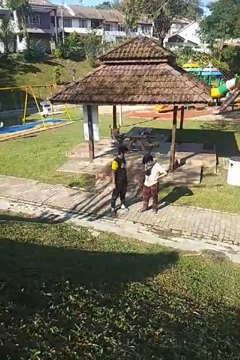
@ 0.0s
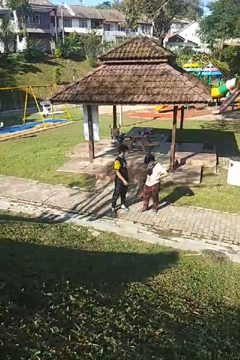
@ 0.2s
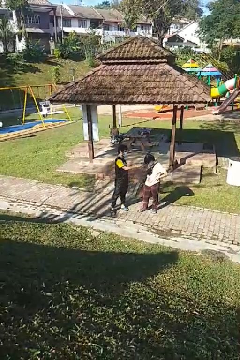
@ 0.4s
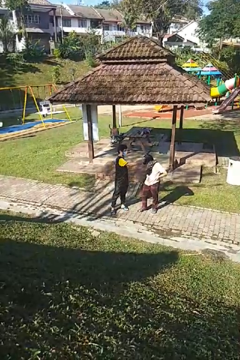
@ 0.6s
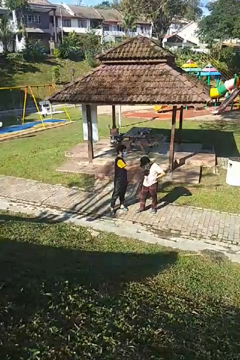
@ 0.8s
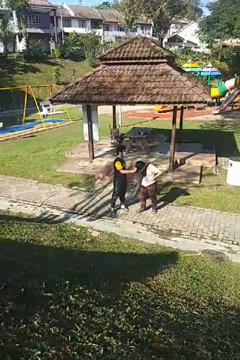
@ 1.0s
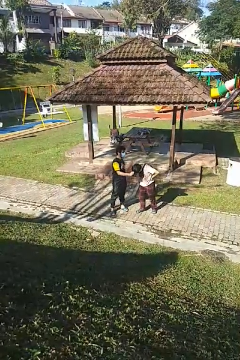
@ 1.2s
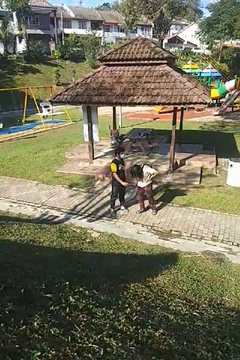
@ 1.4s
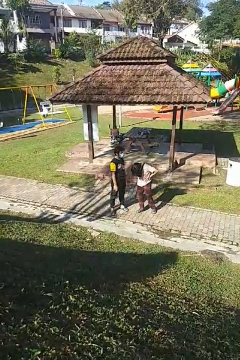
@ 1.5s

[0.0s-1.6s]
person grabs person by hair

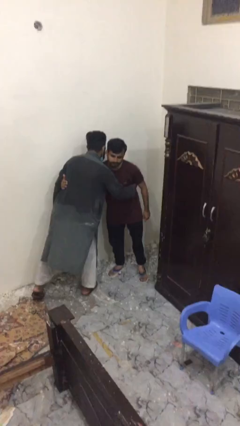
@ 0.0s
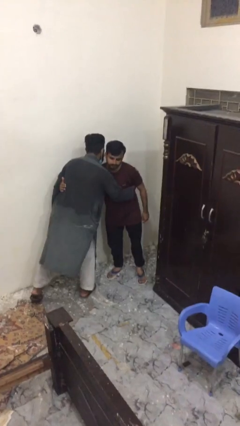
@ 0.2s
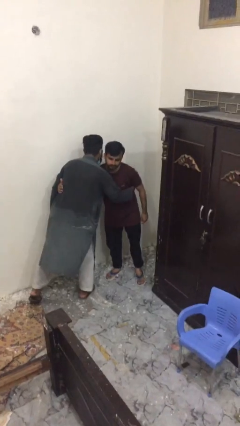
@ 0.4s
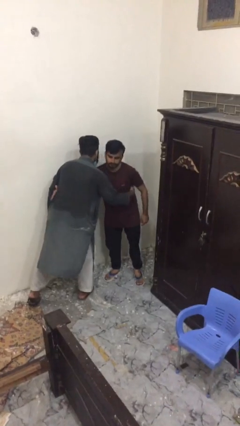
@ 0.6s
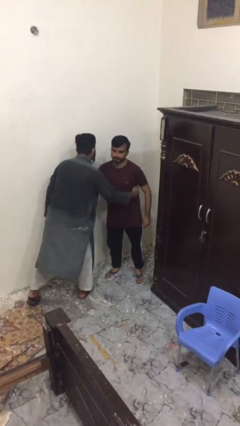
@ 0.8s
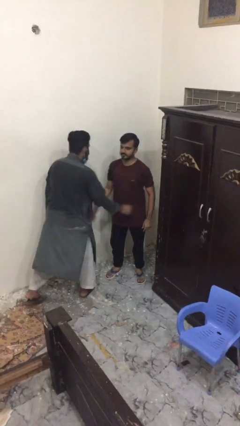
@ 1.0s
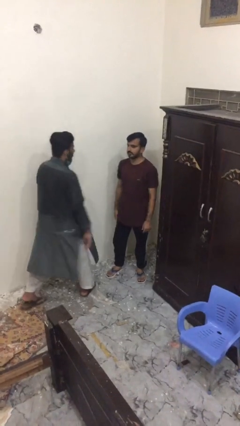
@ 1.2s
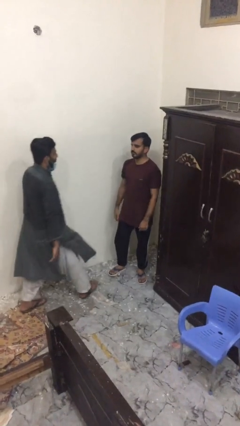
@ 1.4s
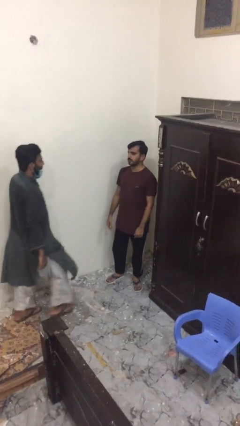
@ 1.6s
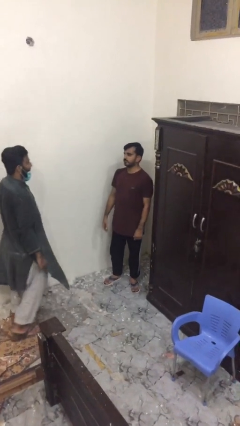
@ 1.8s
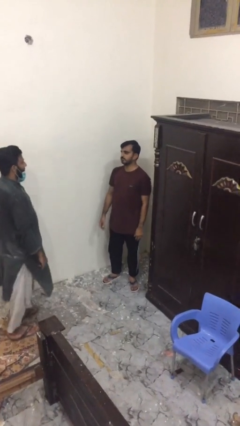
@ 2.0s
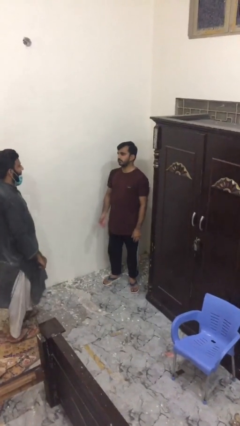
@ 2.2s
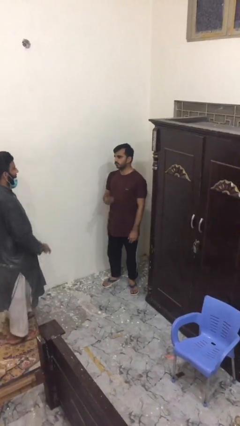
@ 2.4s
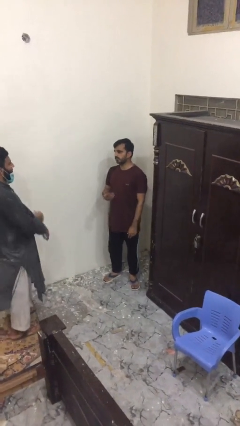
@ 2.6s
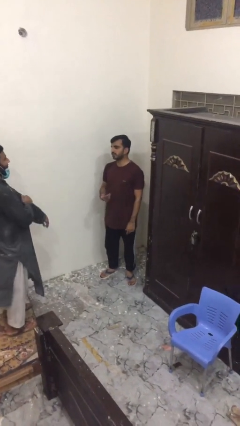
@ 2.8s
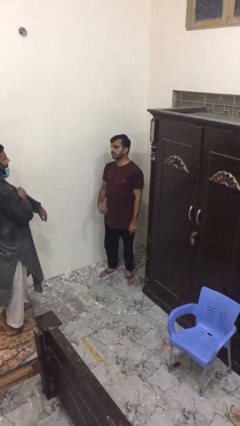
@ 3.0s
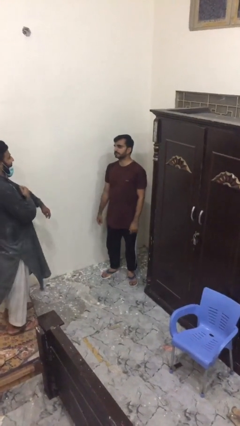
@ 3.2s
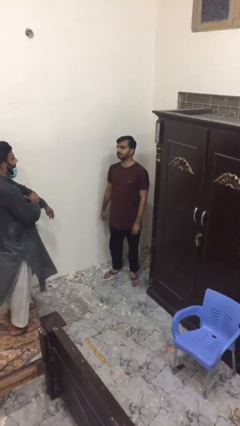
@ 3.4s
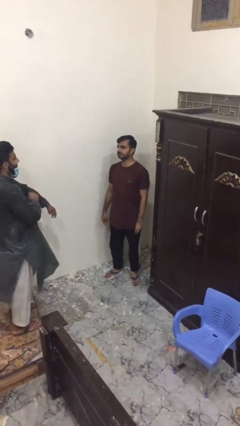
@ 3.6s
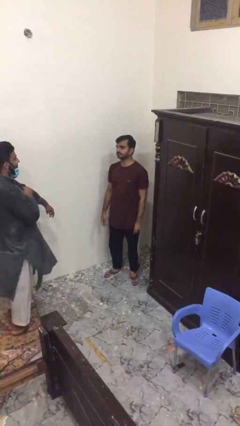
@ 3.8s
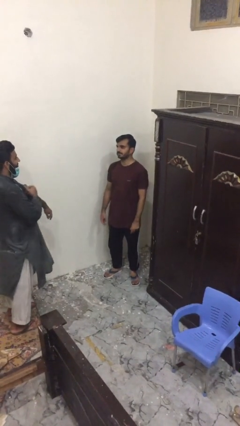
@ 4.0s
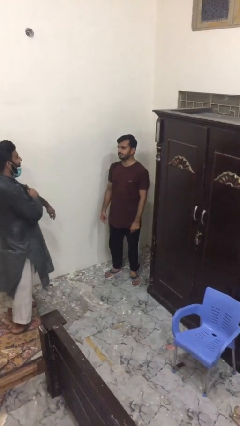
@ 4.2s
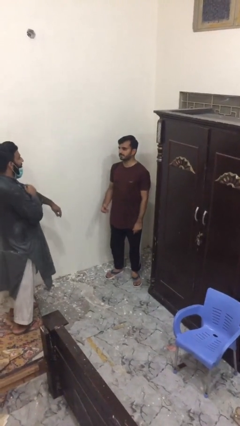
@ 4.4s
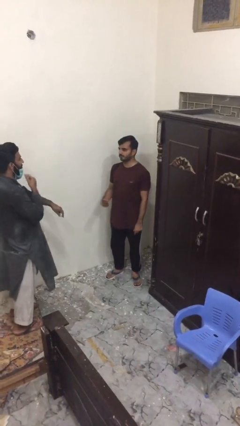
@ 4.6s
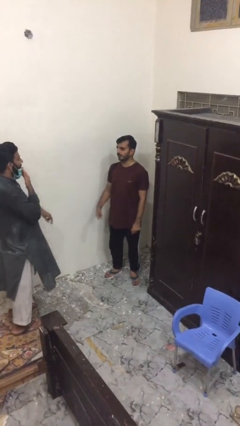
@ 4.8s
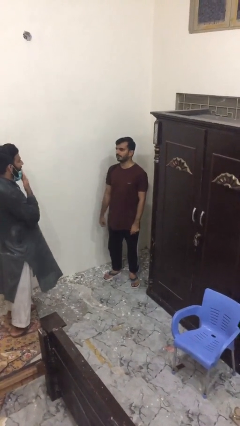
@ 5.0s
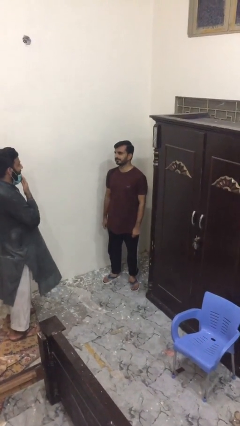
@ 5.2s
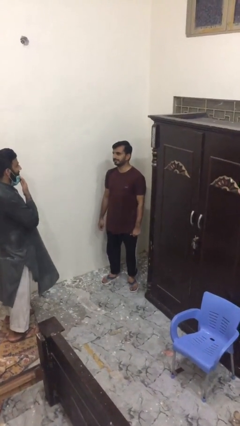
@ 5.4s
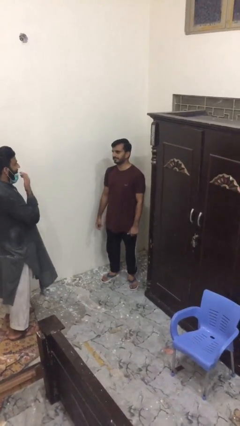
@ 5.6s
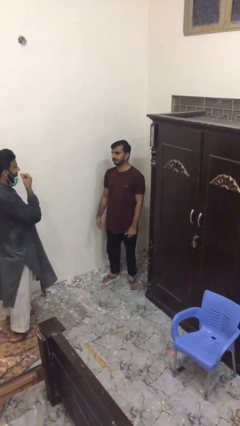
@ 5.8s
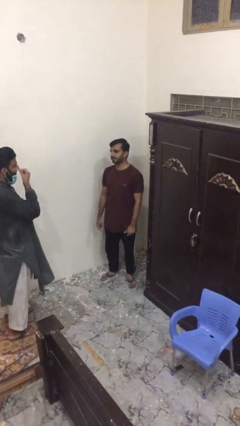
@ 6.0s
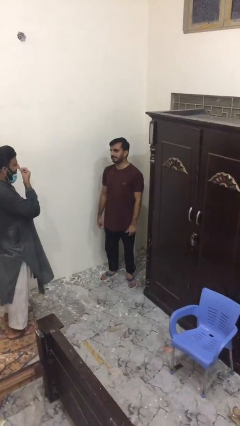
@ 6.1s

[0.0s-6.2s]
person talks to person

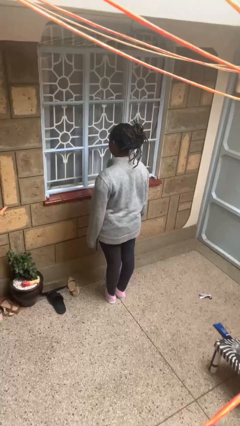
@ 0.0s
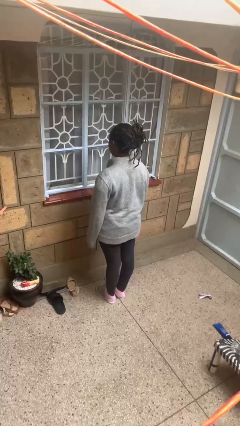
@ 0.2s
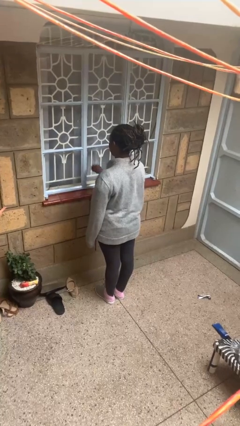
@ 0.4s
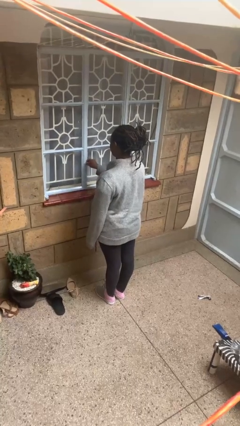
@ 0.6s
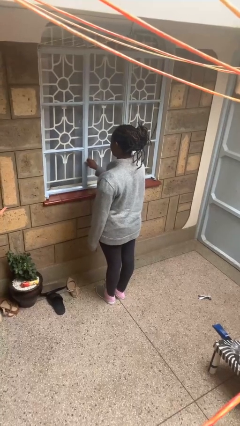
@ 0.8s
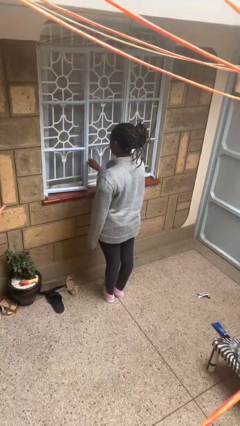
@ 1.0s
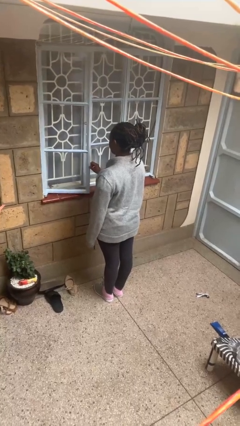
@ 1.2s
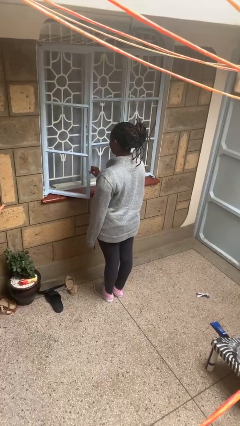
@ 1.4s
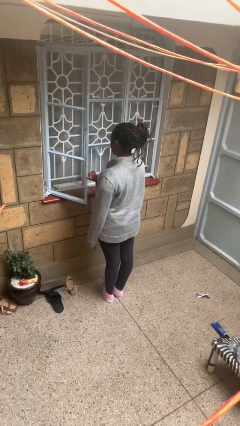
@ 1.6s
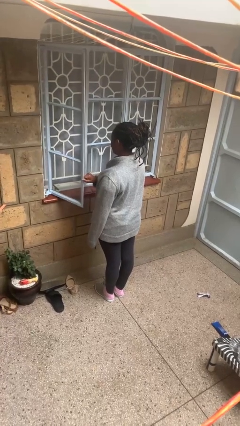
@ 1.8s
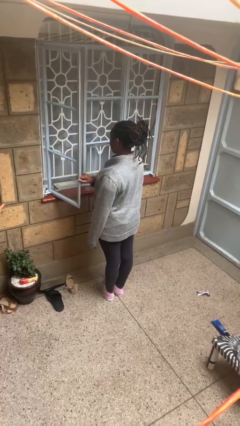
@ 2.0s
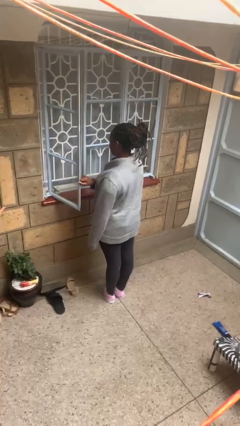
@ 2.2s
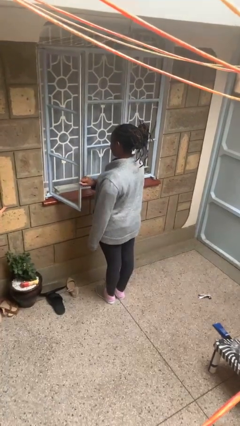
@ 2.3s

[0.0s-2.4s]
person opens home window

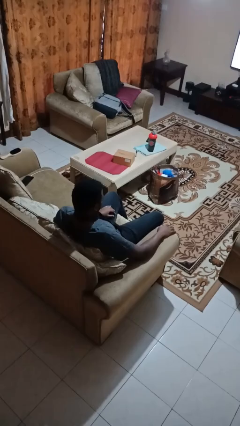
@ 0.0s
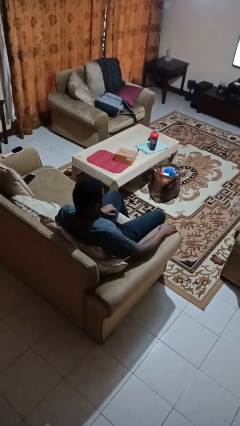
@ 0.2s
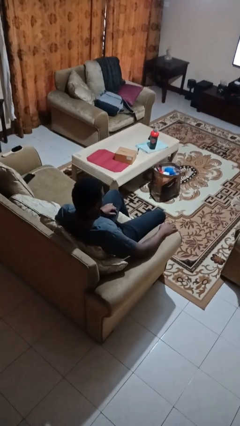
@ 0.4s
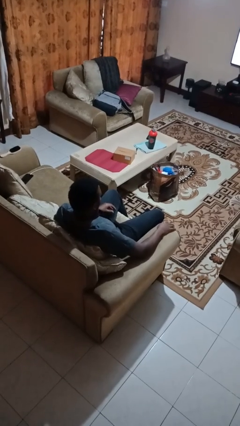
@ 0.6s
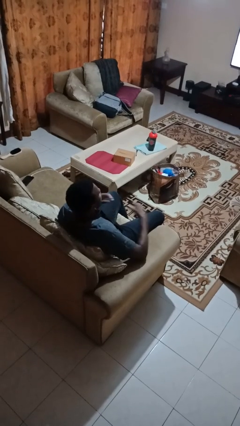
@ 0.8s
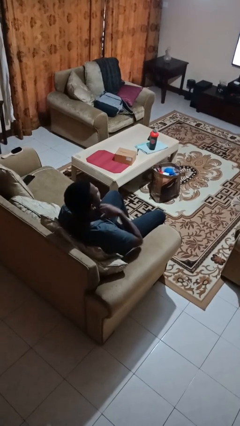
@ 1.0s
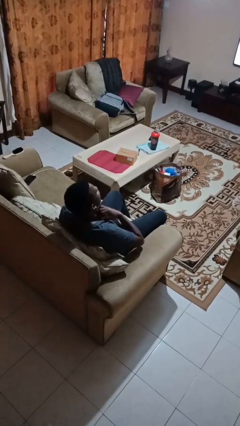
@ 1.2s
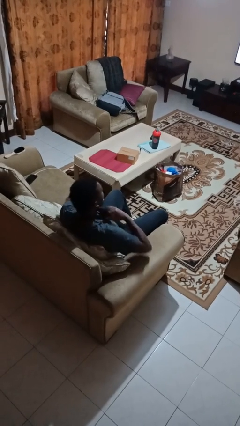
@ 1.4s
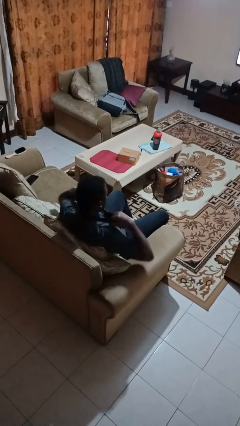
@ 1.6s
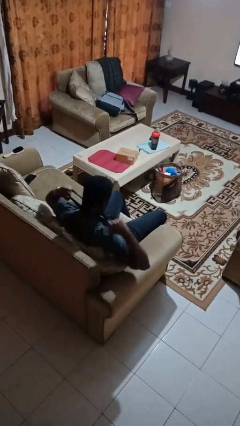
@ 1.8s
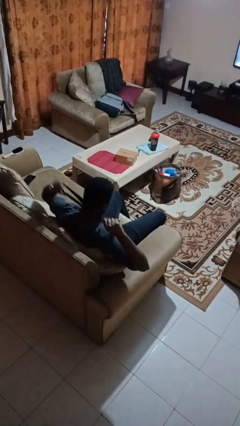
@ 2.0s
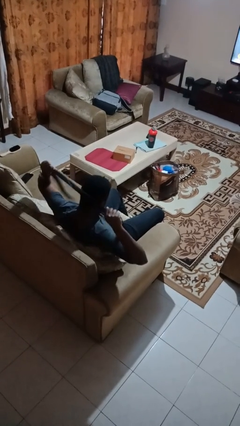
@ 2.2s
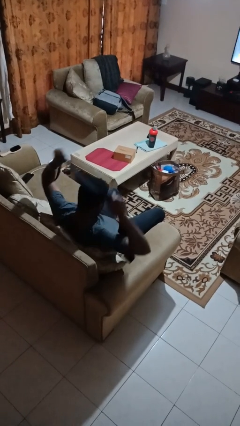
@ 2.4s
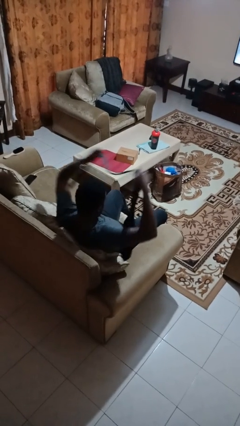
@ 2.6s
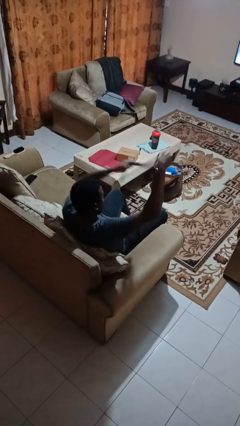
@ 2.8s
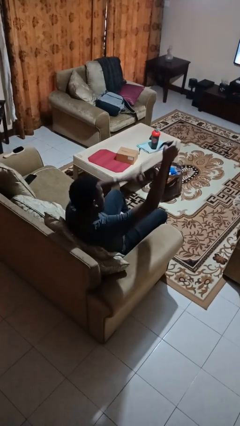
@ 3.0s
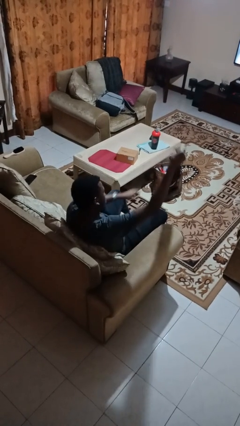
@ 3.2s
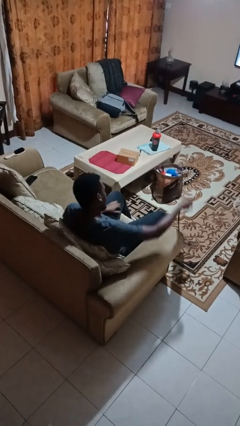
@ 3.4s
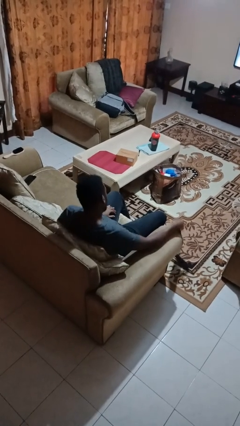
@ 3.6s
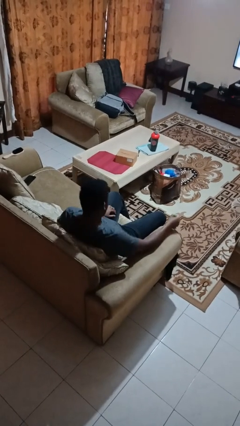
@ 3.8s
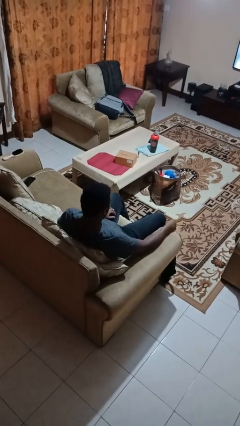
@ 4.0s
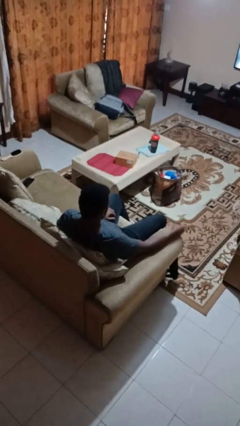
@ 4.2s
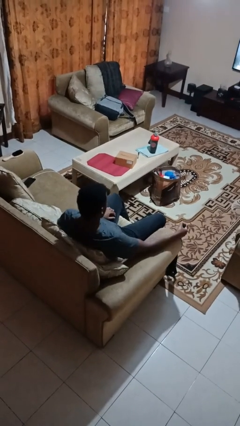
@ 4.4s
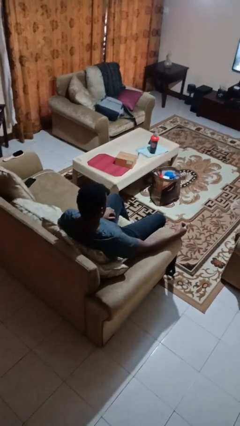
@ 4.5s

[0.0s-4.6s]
person takes off necktie

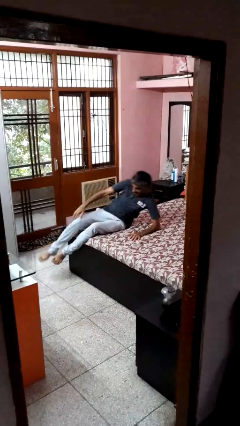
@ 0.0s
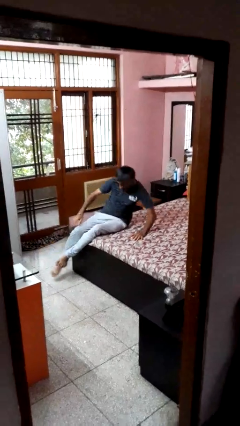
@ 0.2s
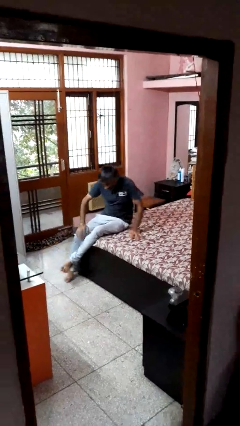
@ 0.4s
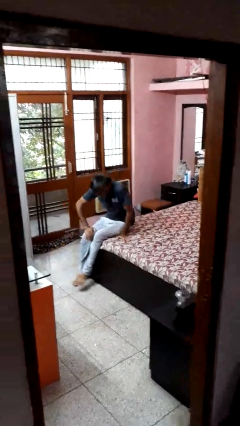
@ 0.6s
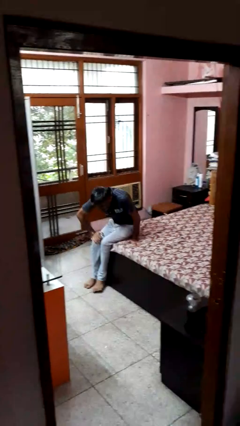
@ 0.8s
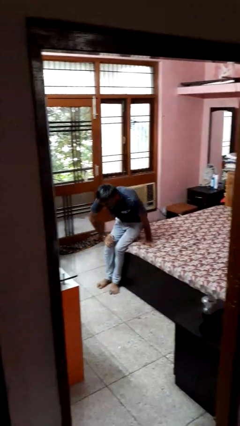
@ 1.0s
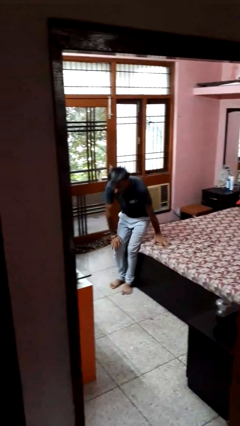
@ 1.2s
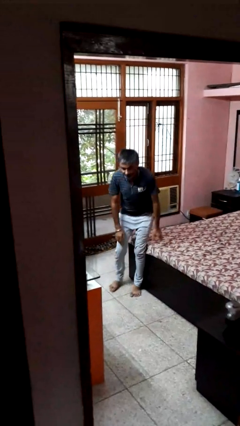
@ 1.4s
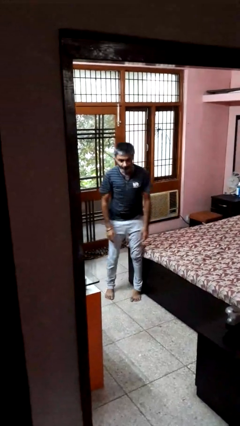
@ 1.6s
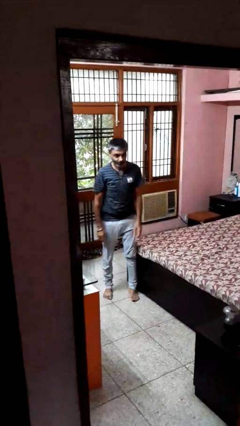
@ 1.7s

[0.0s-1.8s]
person stands up

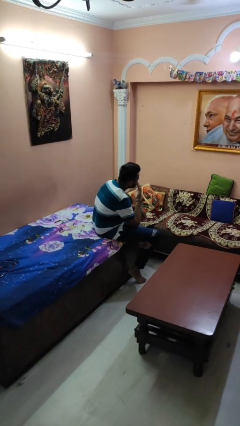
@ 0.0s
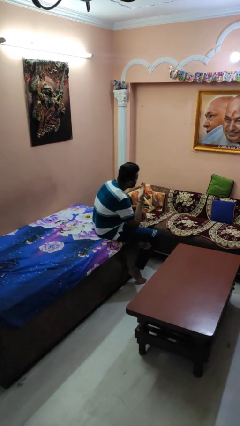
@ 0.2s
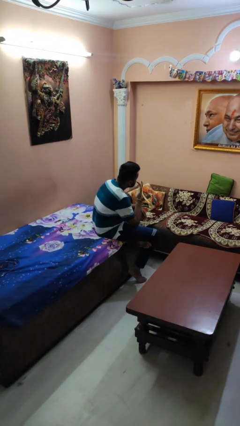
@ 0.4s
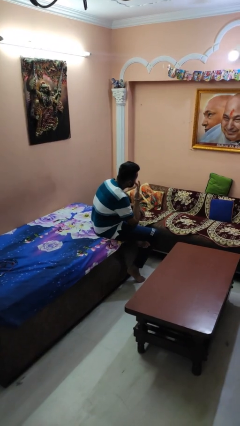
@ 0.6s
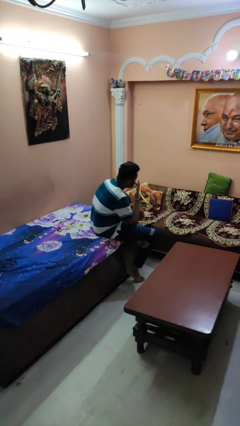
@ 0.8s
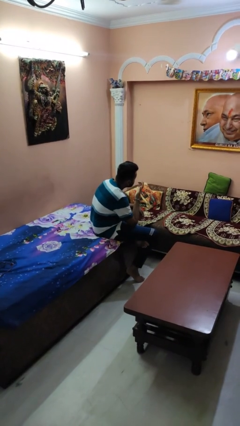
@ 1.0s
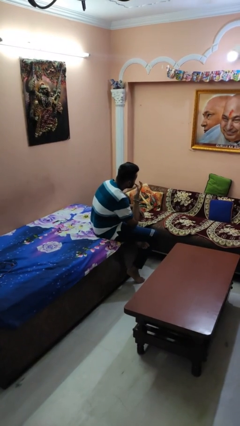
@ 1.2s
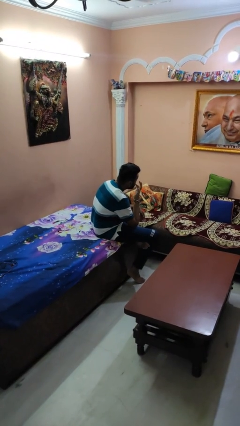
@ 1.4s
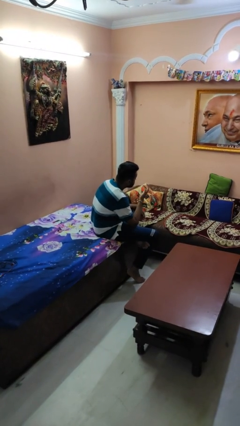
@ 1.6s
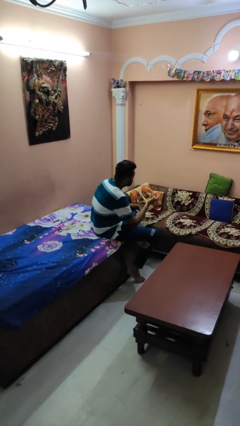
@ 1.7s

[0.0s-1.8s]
person licks fingers
